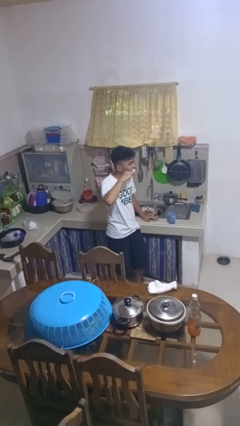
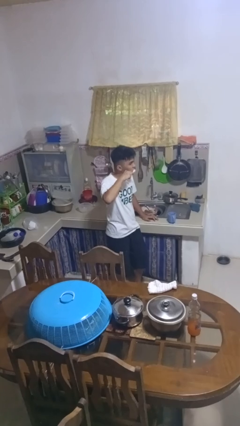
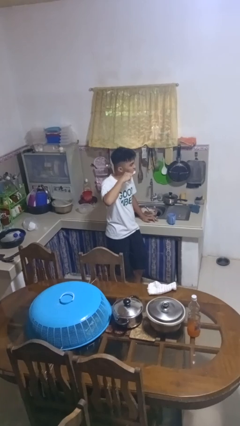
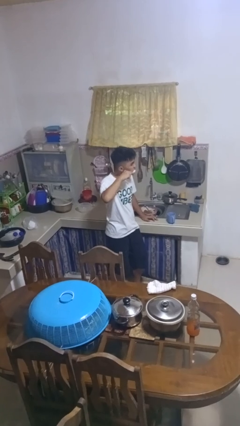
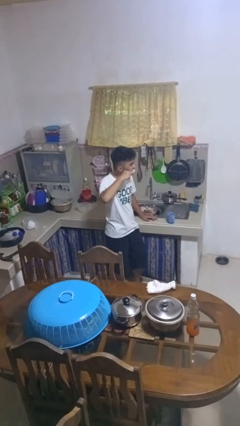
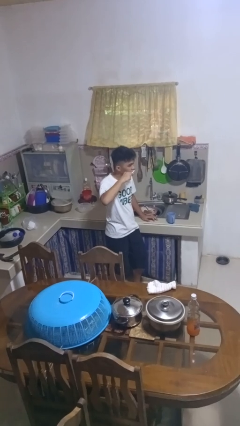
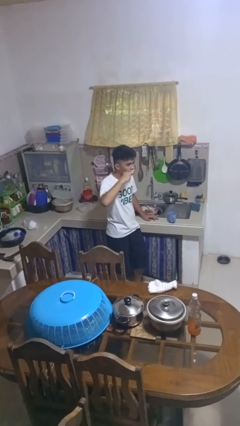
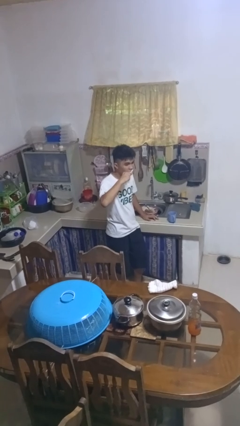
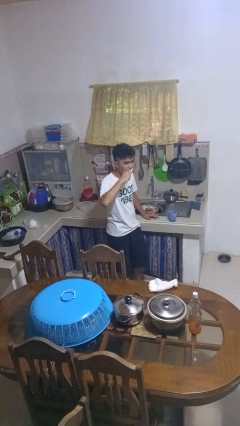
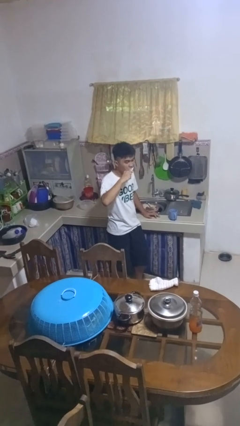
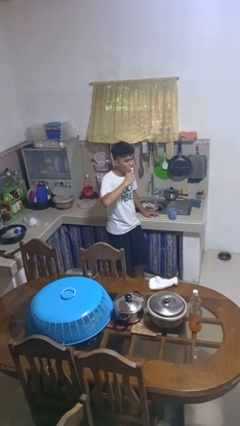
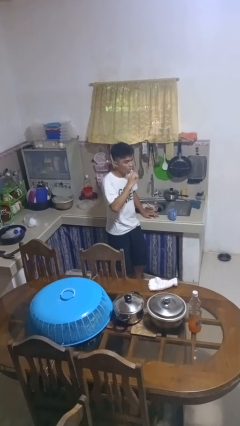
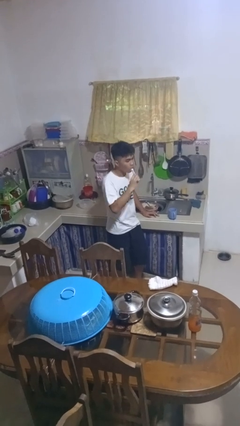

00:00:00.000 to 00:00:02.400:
person brushes teeth

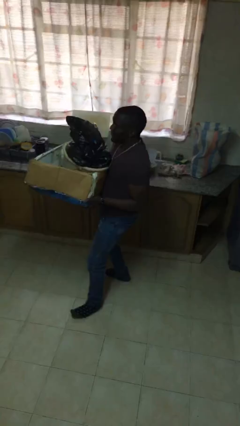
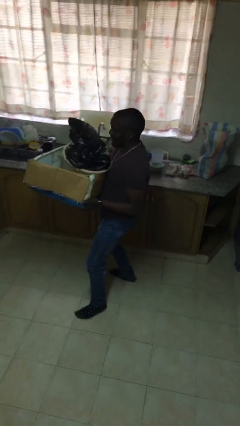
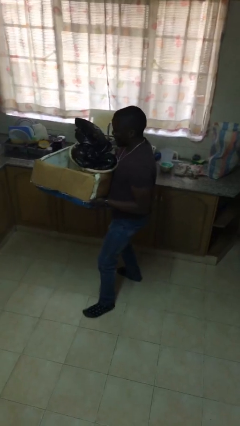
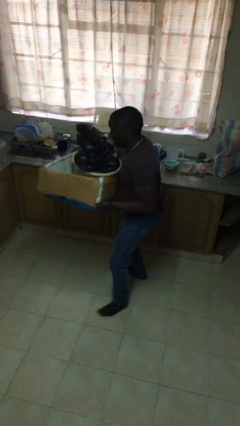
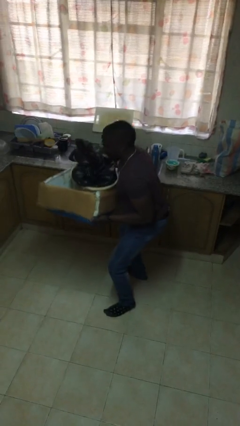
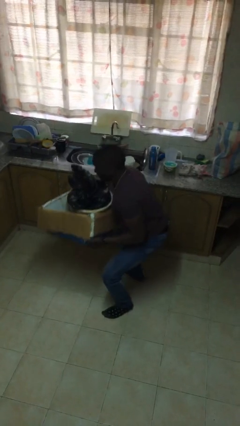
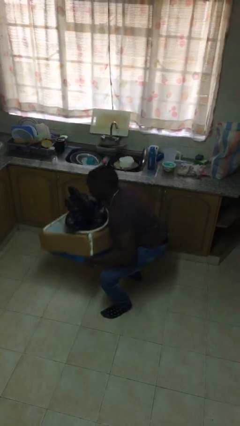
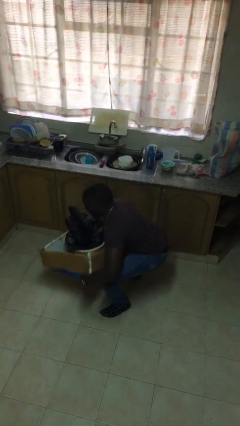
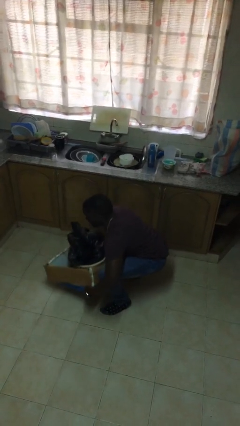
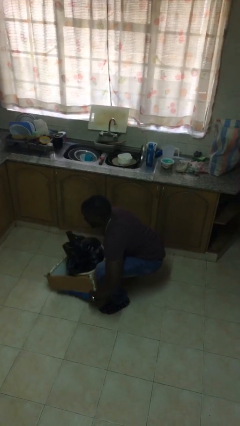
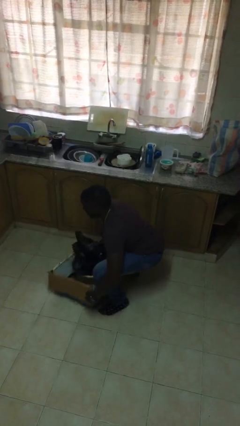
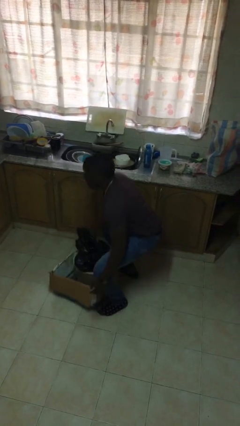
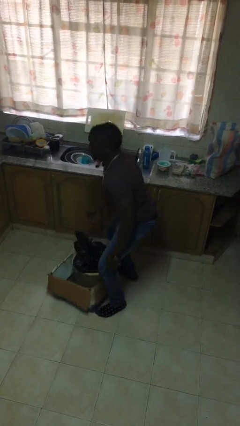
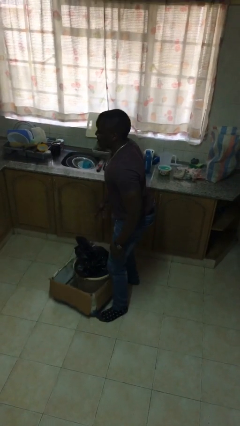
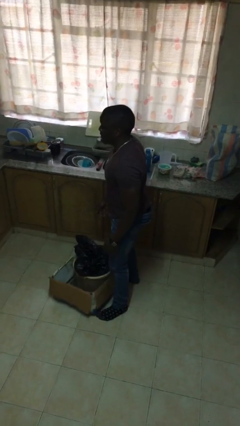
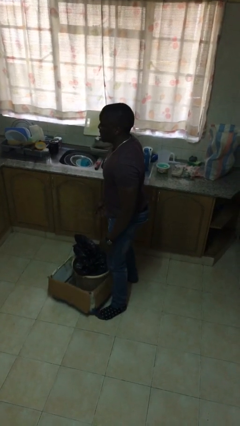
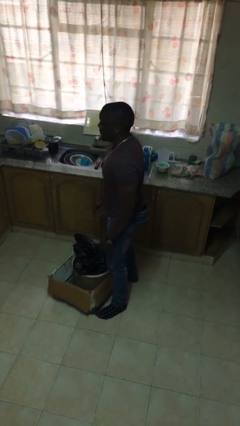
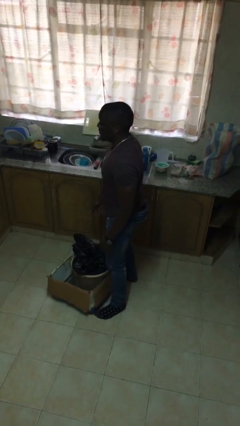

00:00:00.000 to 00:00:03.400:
person puts down object on floor

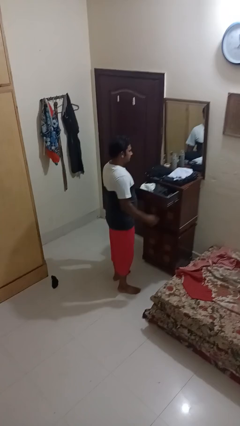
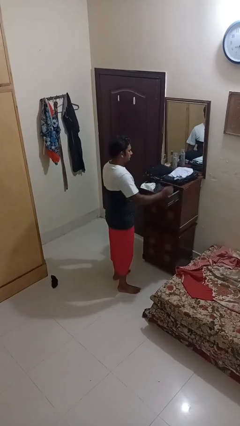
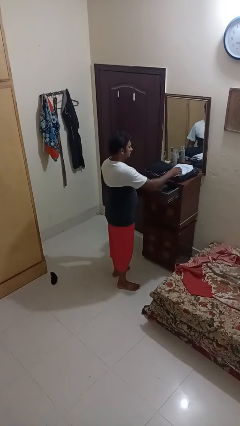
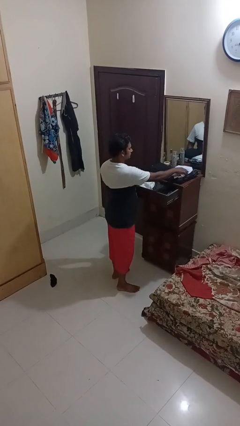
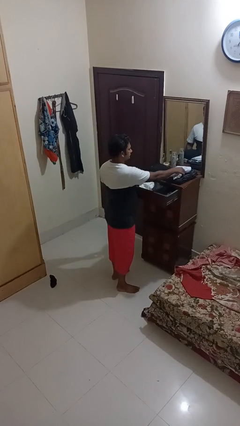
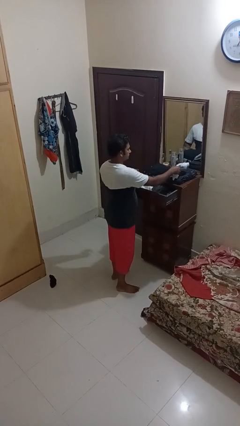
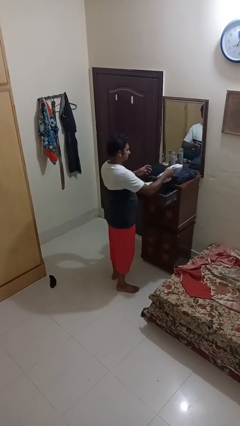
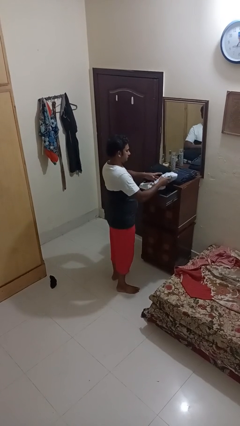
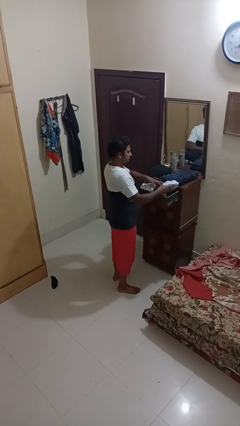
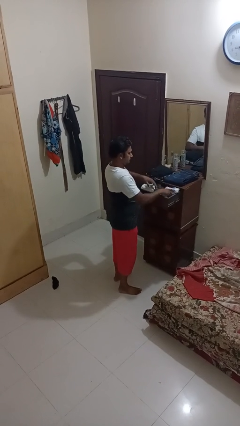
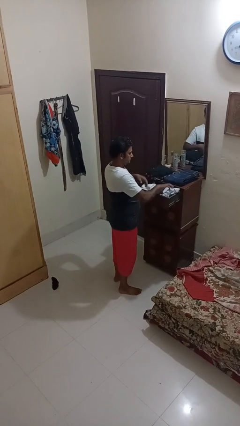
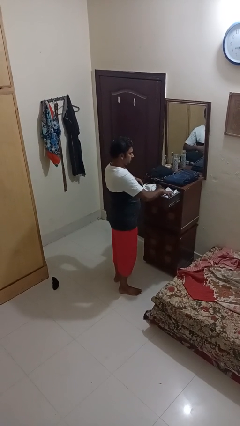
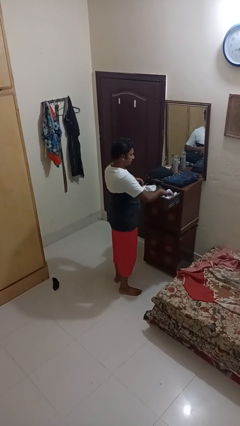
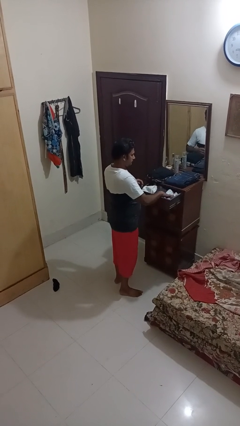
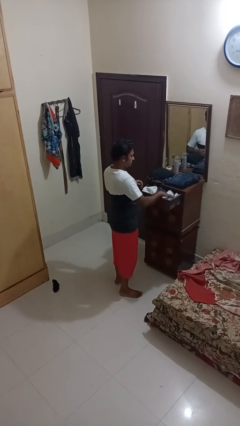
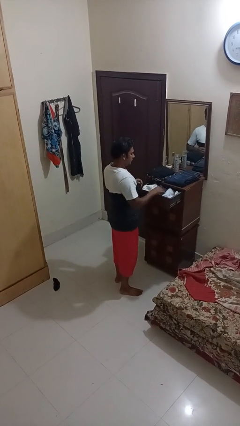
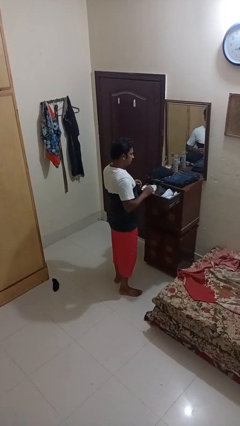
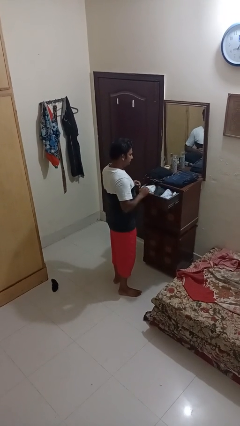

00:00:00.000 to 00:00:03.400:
person puts clothes into dresser

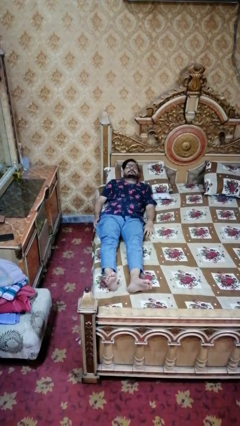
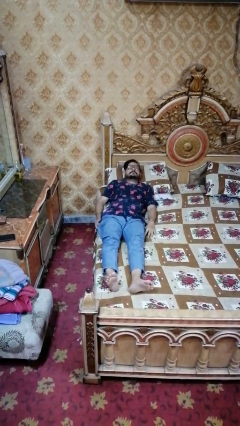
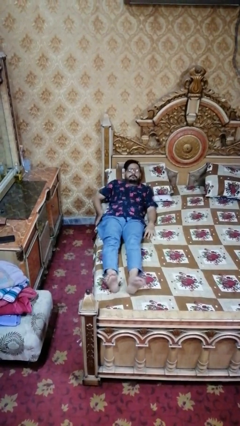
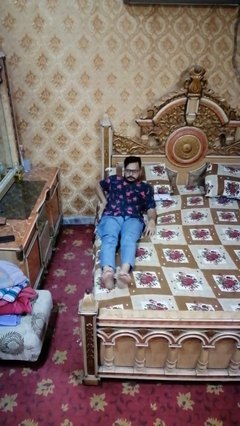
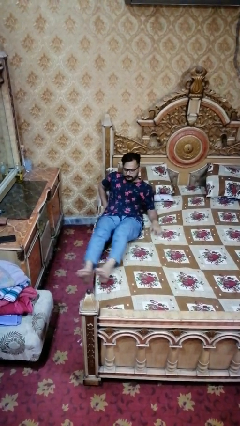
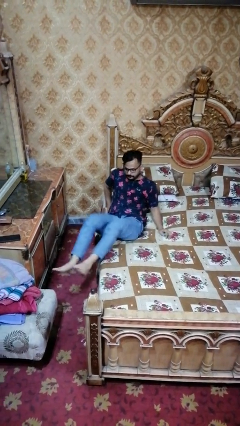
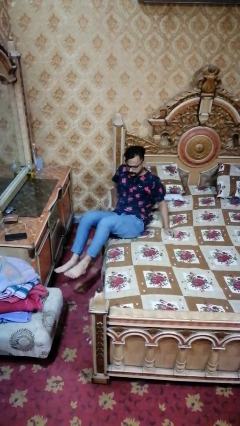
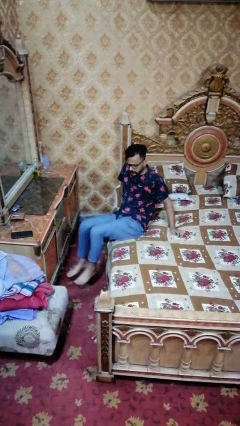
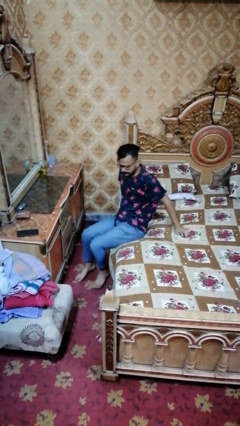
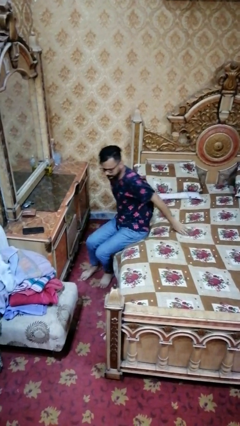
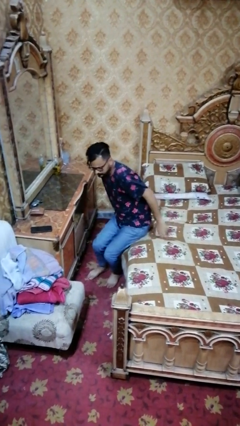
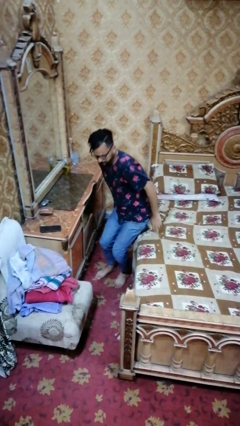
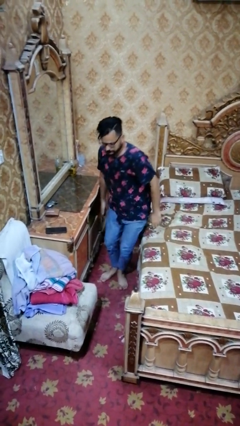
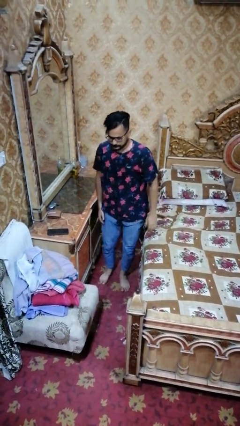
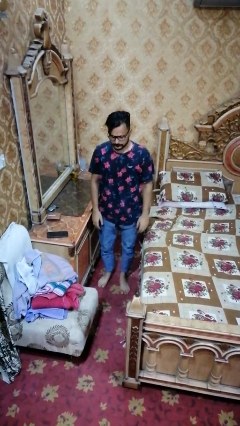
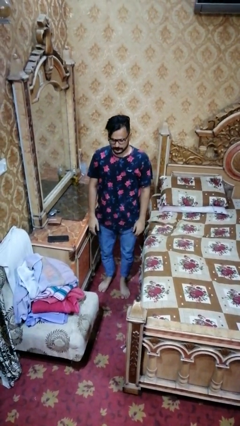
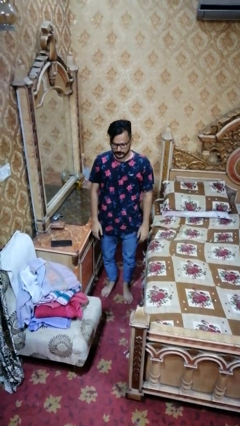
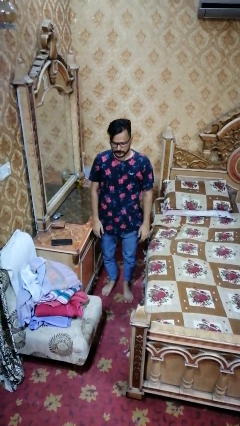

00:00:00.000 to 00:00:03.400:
person stands up

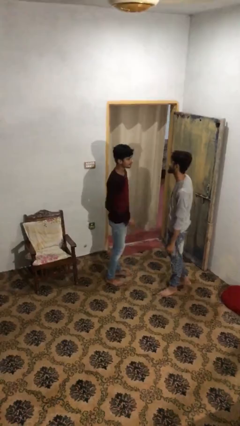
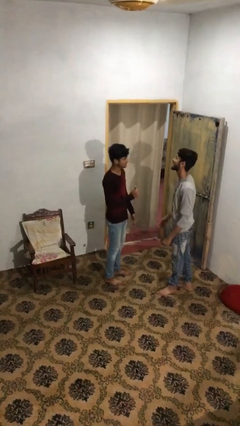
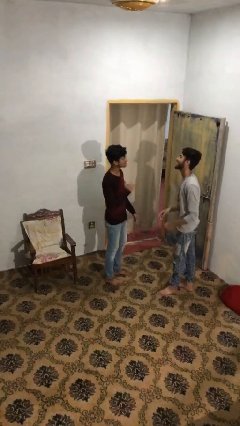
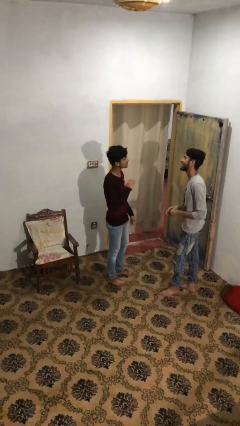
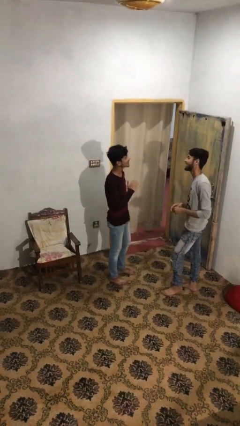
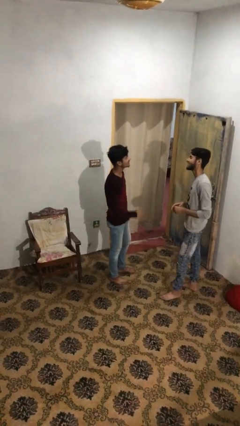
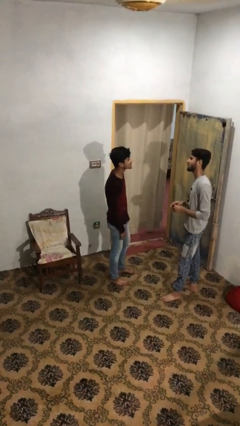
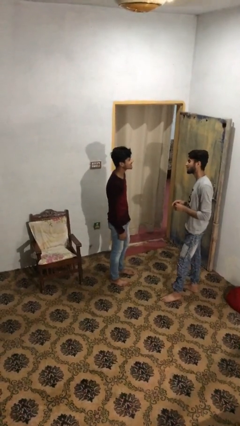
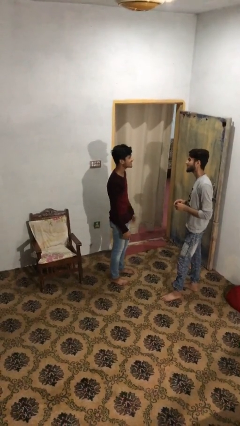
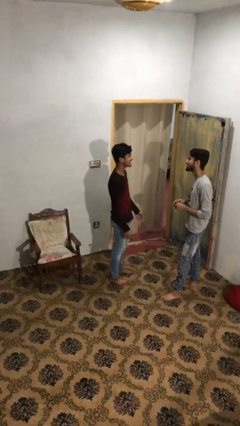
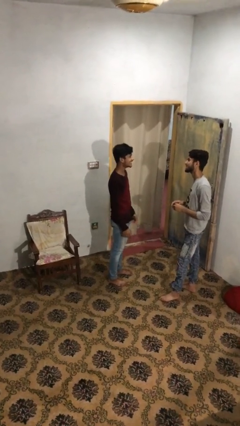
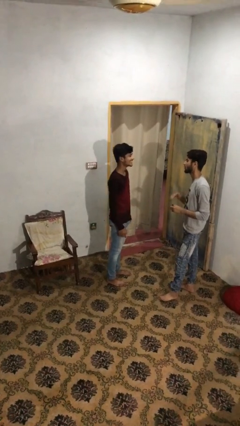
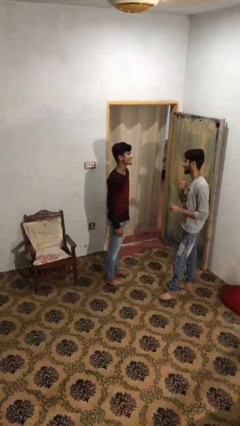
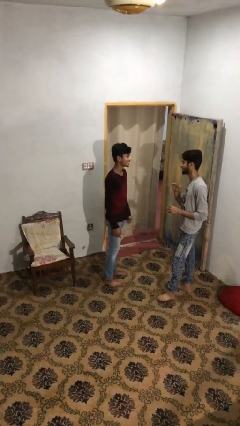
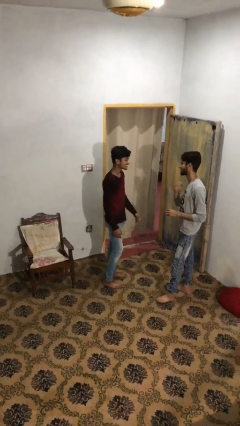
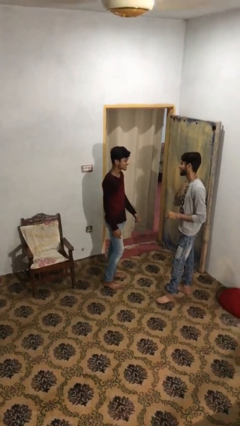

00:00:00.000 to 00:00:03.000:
person talks to person

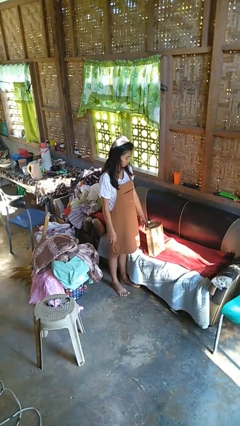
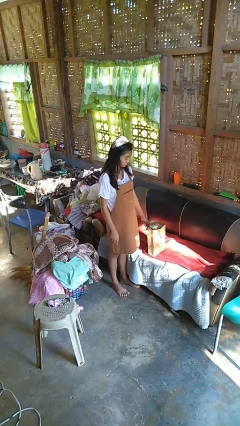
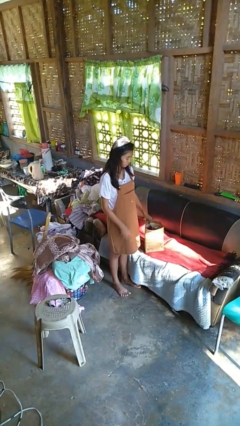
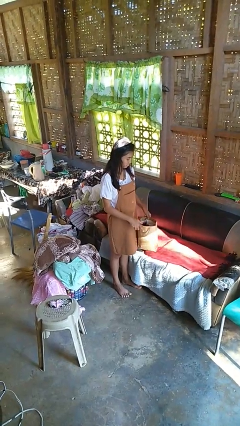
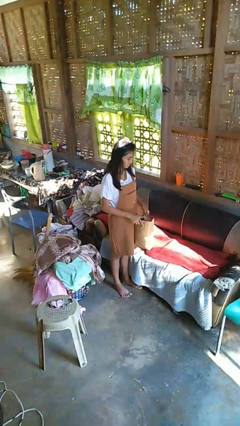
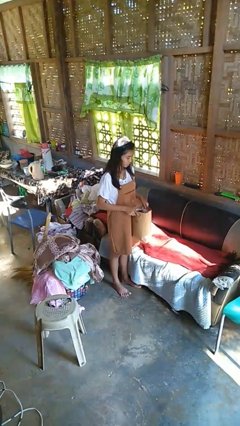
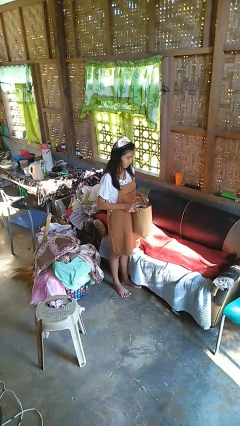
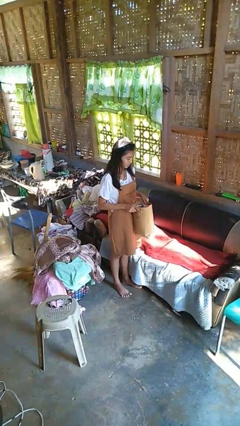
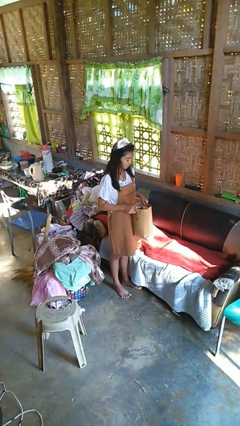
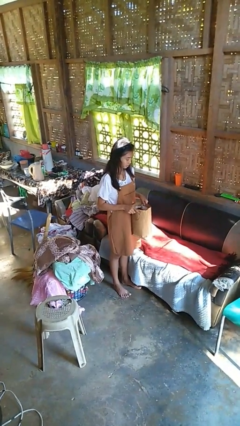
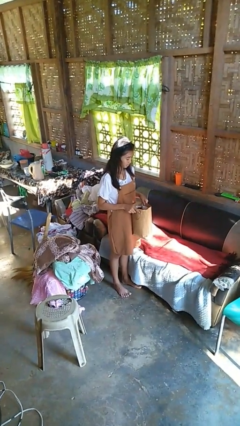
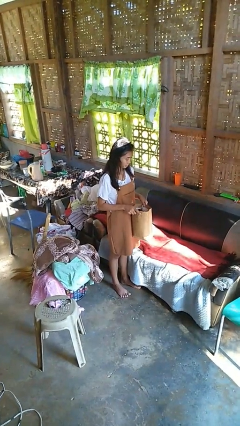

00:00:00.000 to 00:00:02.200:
person picks up object from couch

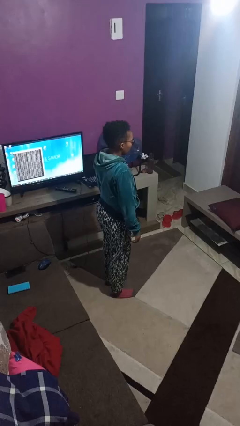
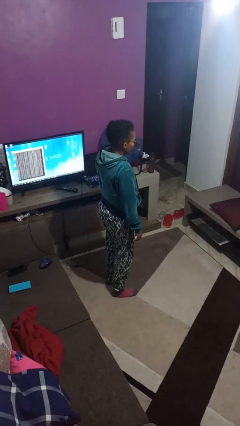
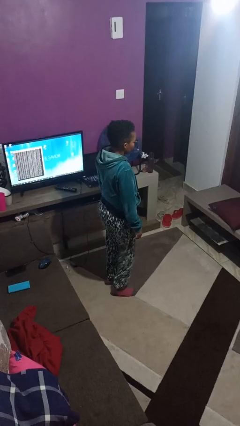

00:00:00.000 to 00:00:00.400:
person throws object on table
